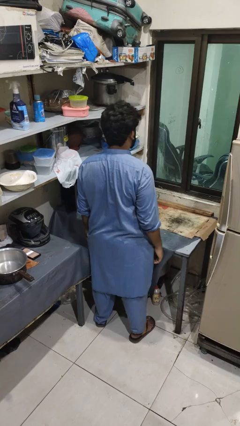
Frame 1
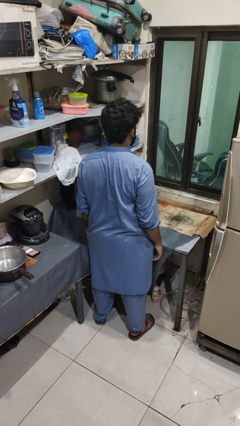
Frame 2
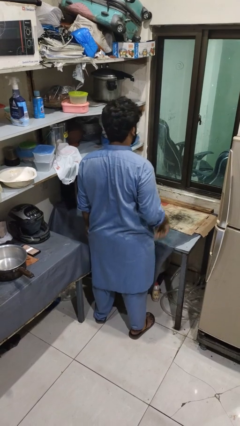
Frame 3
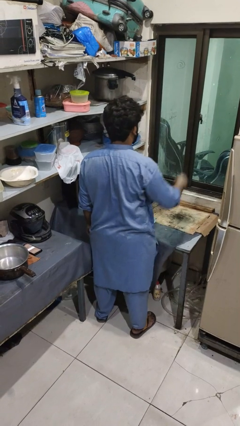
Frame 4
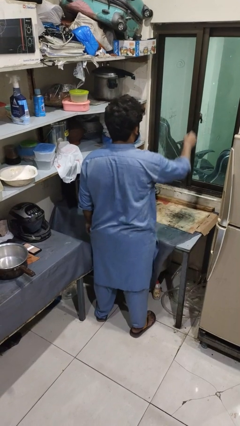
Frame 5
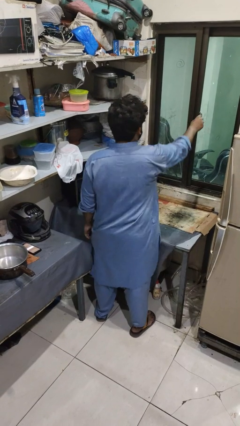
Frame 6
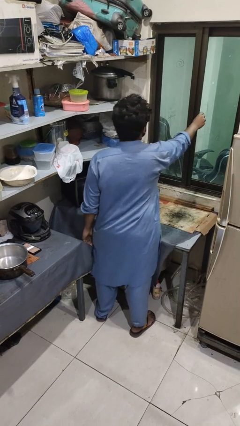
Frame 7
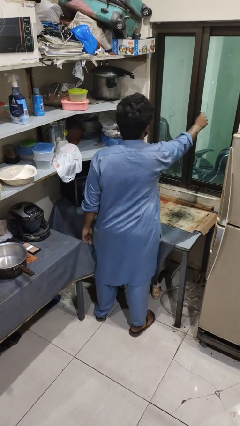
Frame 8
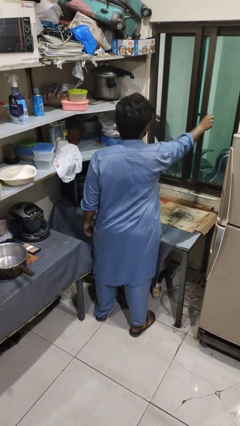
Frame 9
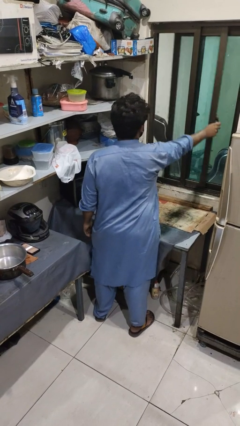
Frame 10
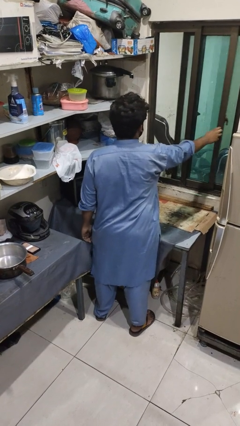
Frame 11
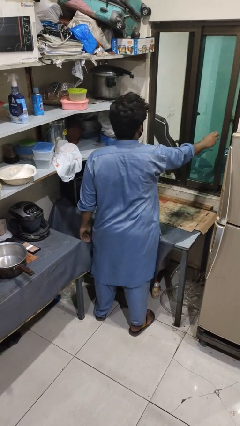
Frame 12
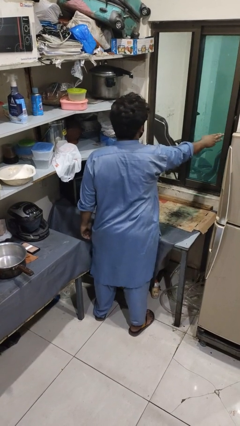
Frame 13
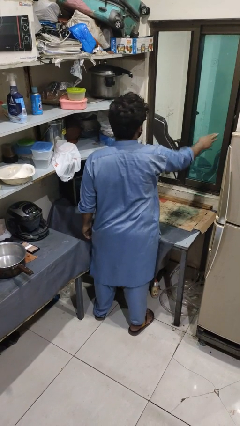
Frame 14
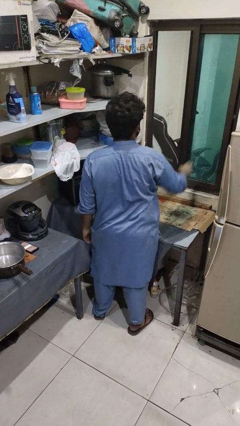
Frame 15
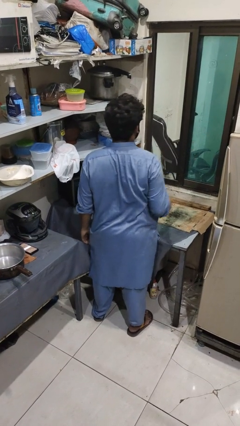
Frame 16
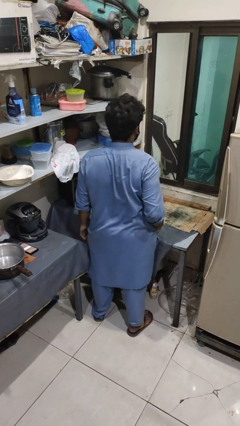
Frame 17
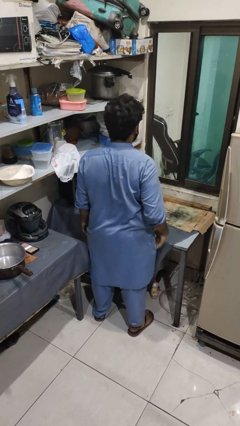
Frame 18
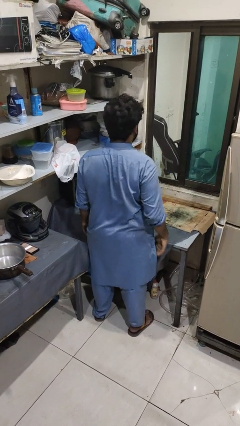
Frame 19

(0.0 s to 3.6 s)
person opens home window

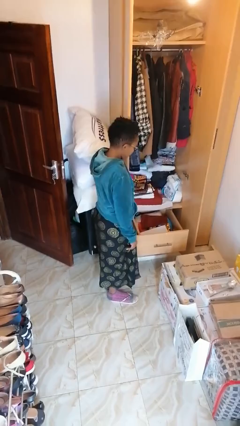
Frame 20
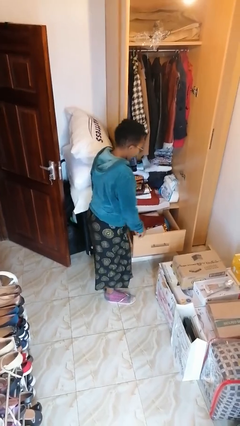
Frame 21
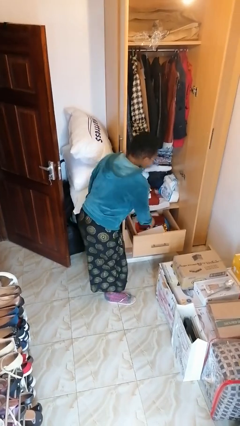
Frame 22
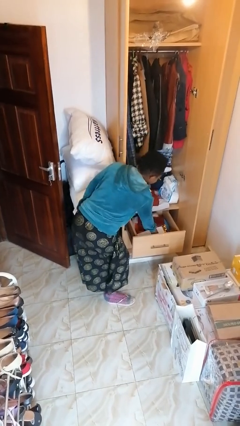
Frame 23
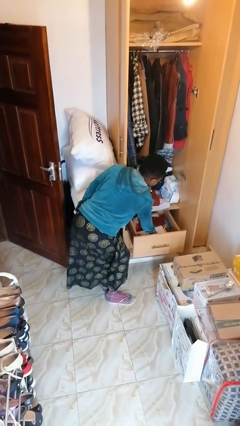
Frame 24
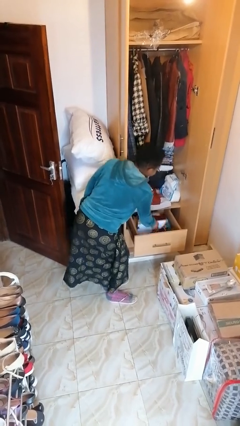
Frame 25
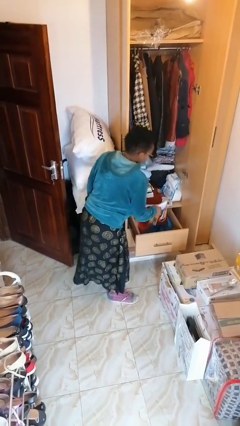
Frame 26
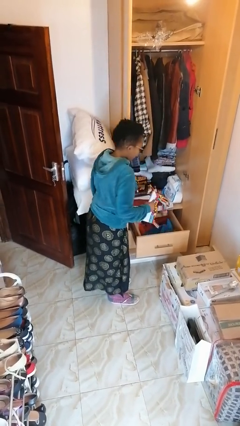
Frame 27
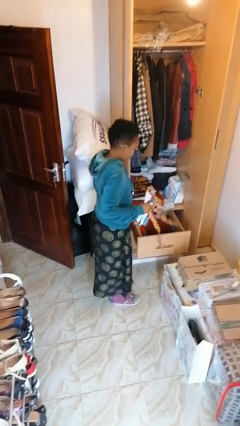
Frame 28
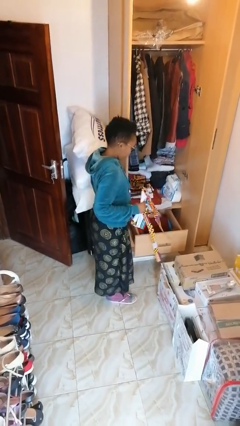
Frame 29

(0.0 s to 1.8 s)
person takes clothes from dresser

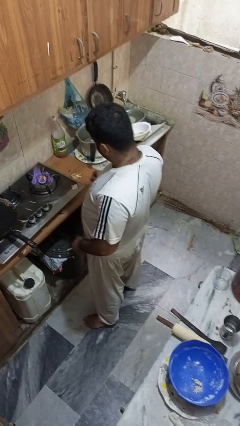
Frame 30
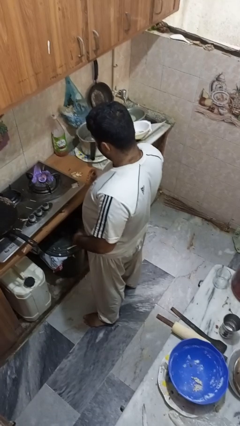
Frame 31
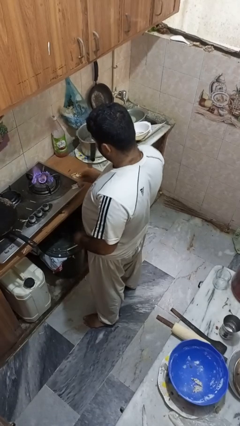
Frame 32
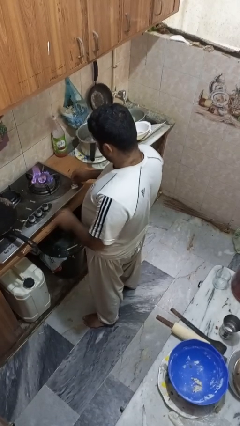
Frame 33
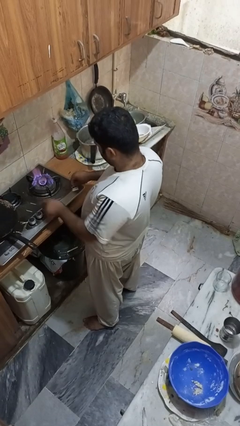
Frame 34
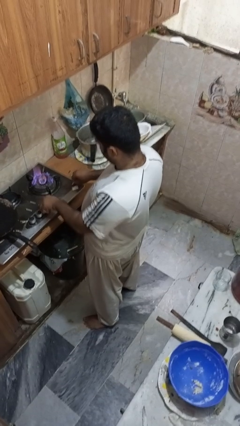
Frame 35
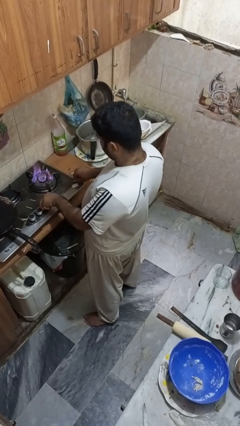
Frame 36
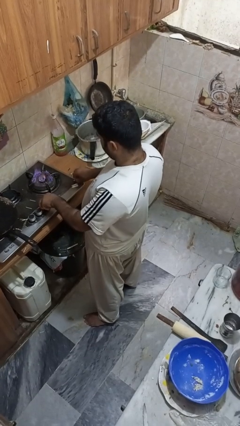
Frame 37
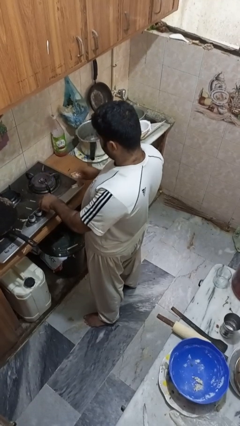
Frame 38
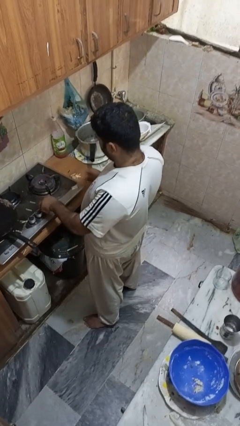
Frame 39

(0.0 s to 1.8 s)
person turns off stovetop

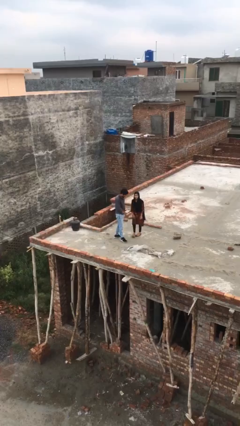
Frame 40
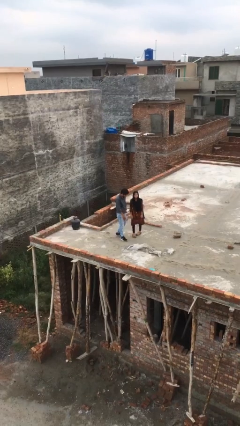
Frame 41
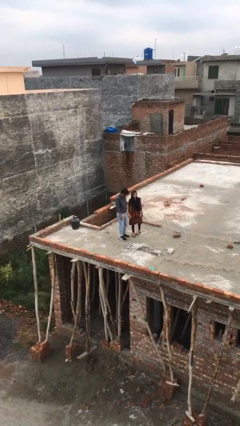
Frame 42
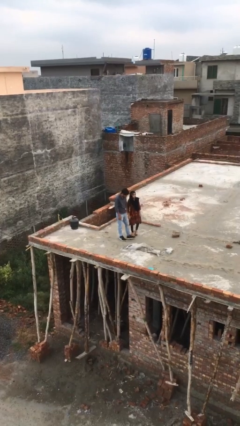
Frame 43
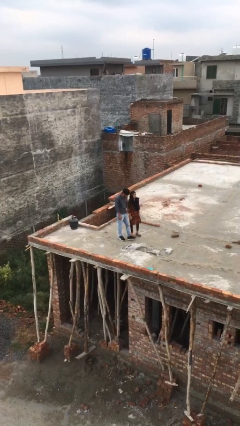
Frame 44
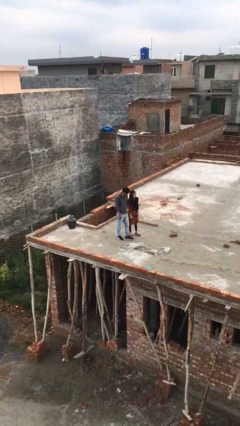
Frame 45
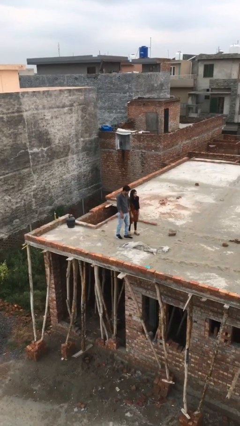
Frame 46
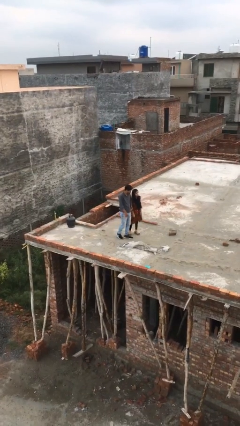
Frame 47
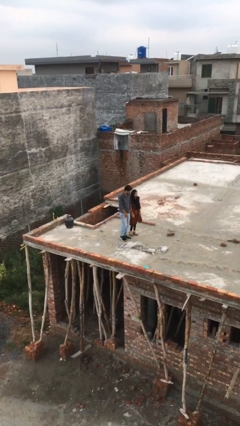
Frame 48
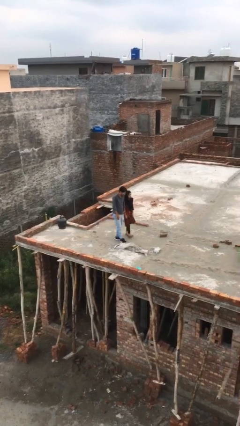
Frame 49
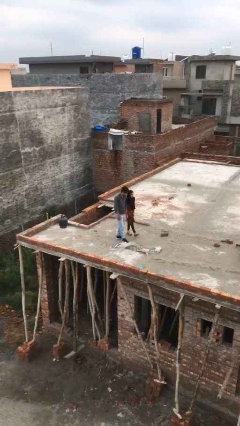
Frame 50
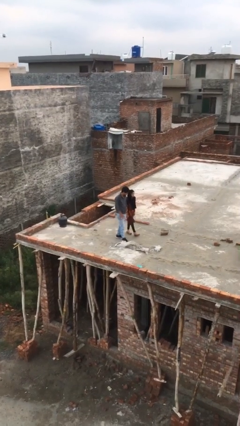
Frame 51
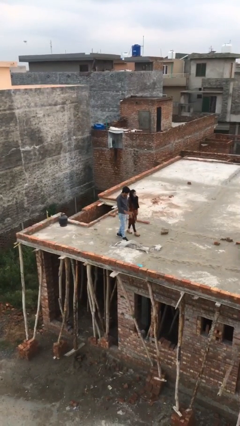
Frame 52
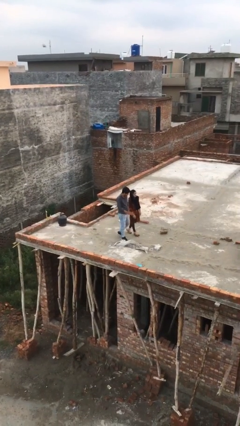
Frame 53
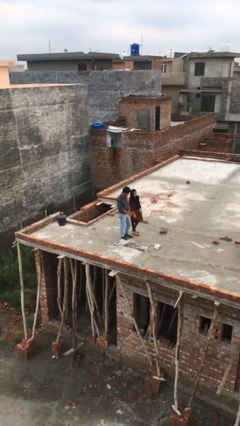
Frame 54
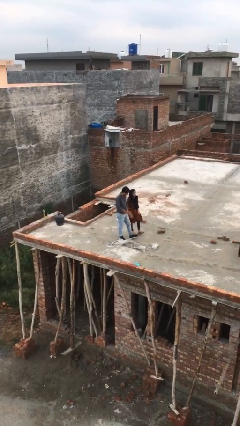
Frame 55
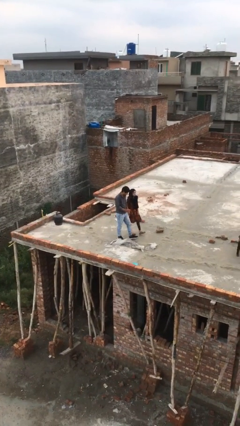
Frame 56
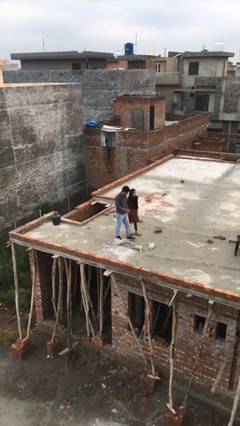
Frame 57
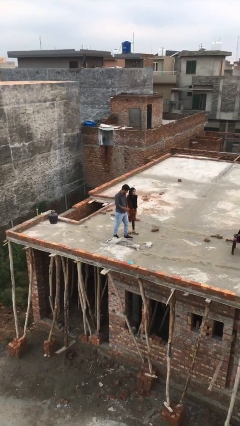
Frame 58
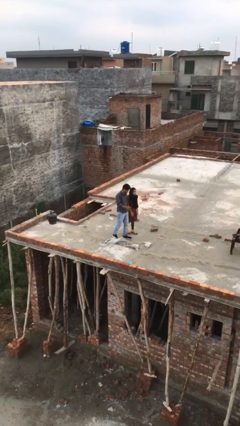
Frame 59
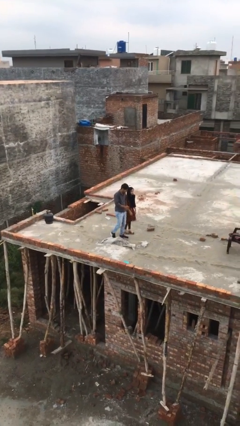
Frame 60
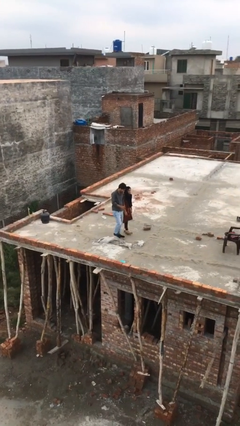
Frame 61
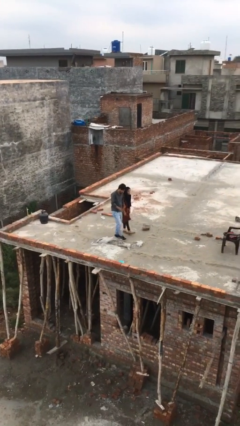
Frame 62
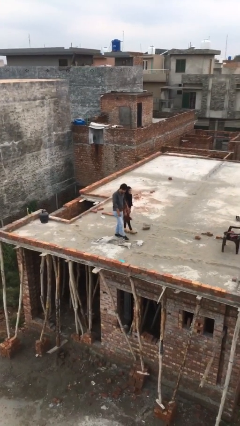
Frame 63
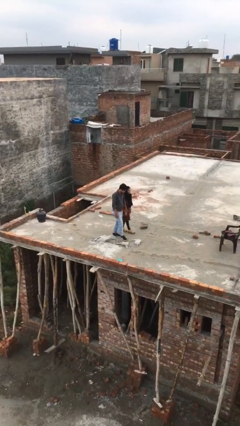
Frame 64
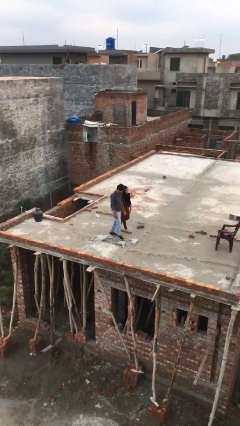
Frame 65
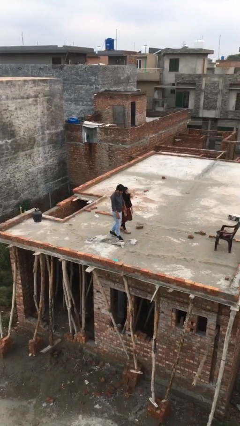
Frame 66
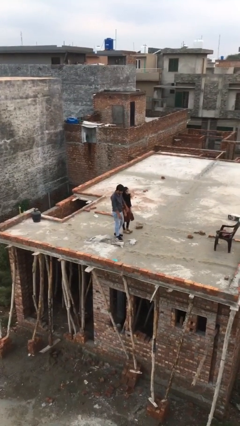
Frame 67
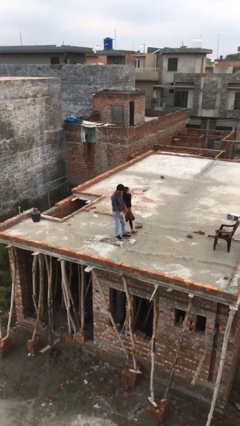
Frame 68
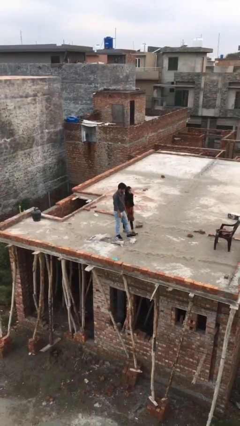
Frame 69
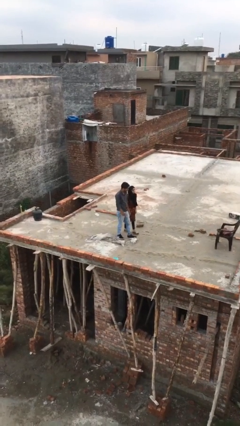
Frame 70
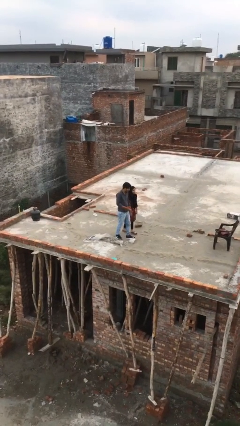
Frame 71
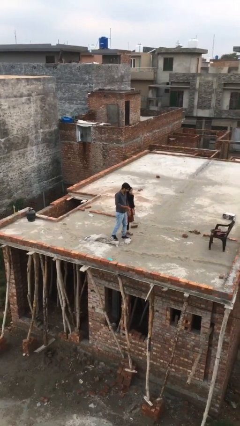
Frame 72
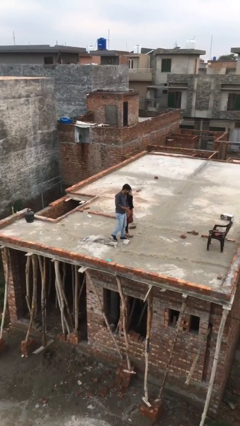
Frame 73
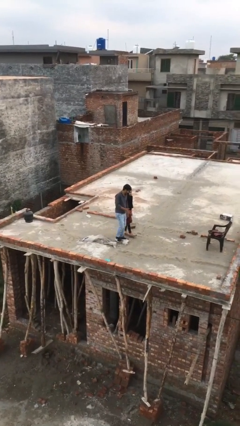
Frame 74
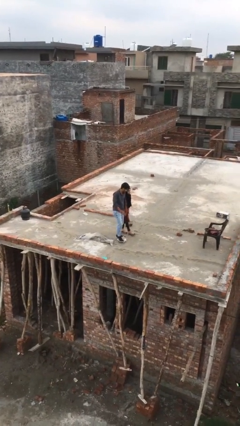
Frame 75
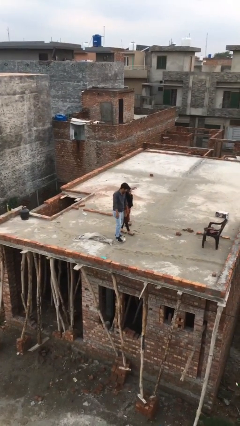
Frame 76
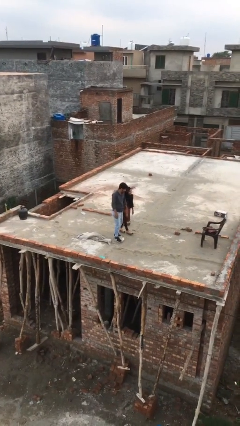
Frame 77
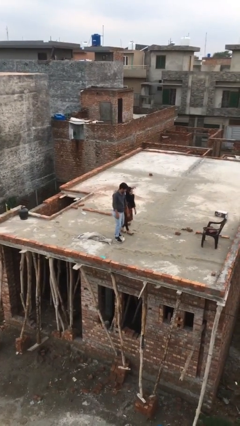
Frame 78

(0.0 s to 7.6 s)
person talks to person

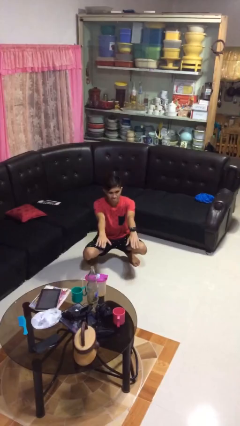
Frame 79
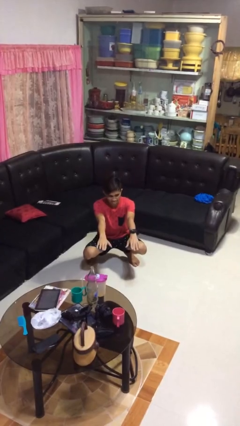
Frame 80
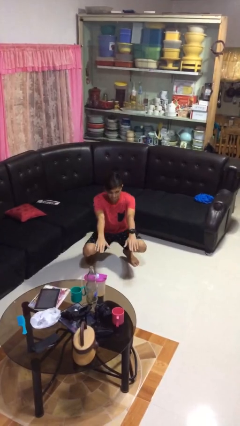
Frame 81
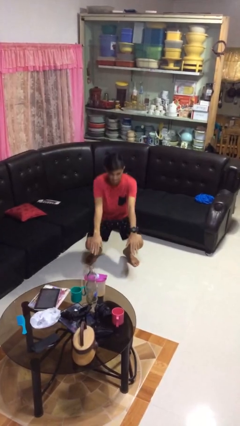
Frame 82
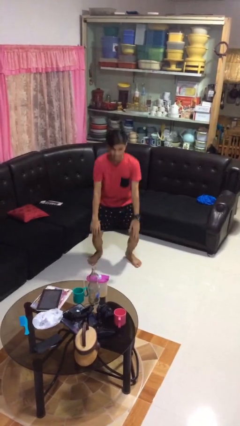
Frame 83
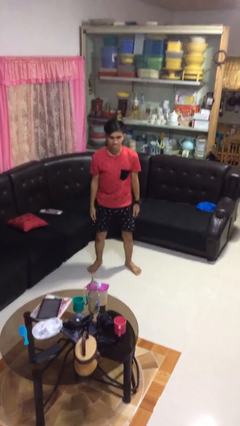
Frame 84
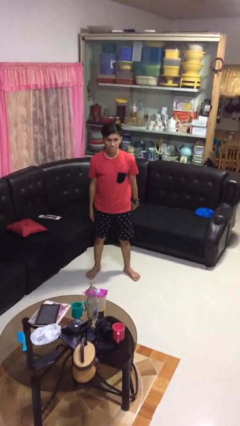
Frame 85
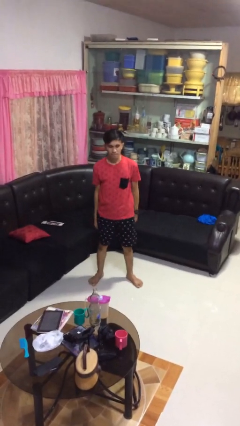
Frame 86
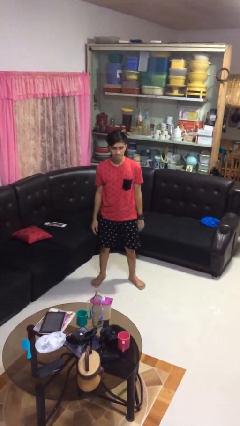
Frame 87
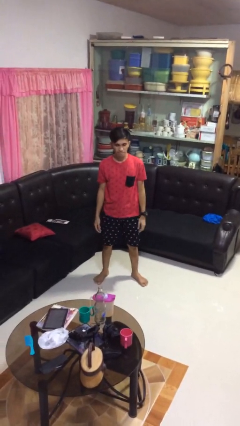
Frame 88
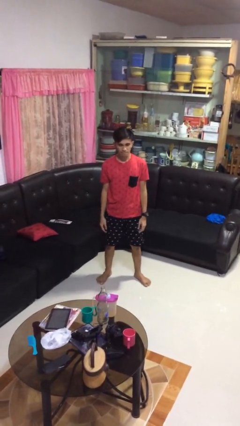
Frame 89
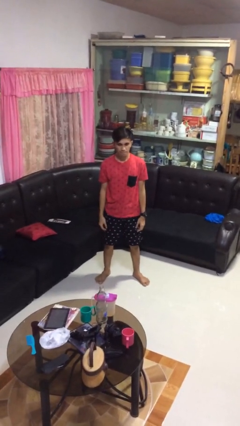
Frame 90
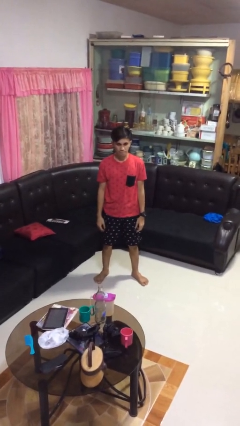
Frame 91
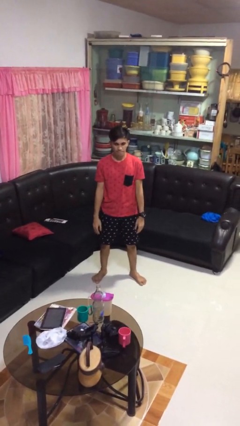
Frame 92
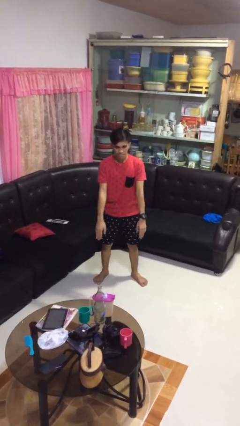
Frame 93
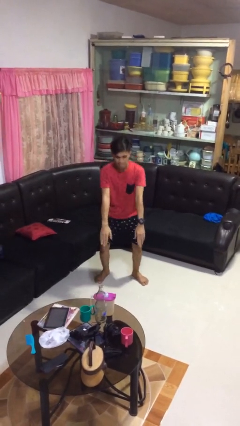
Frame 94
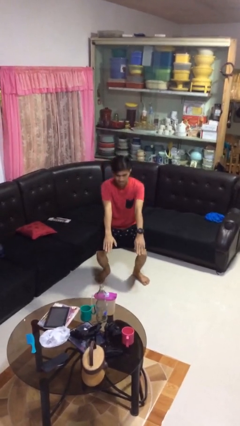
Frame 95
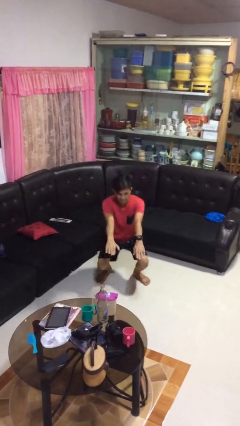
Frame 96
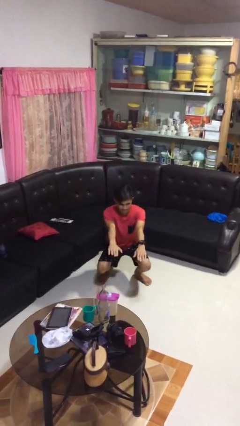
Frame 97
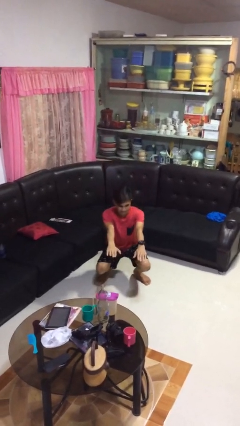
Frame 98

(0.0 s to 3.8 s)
person stands up
